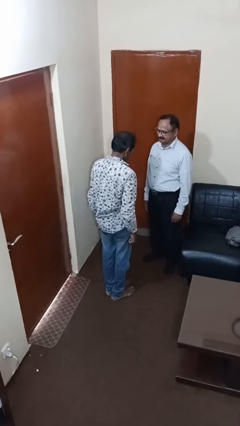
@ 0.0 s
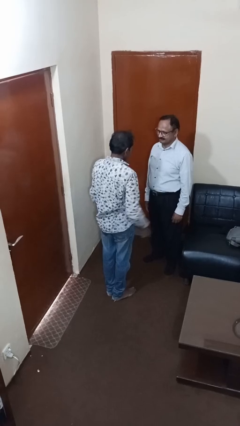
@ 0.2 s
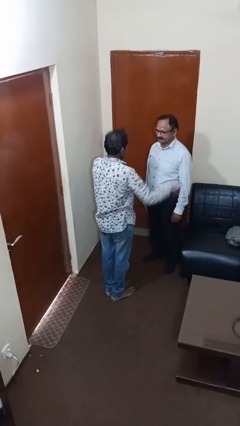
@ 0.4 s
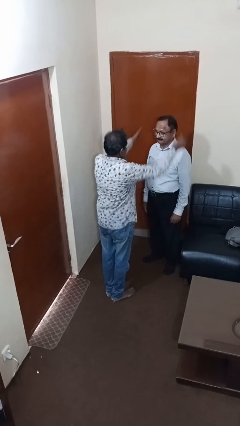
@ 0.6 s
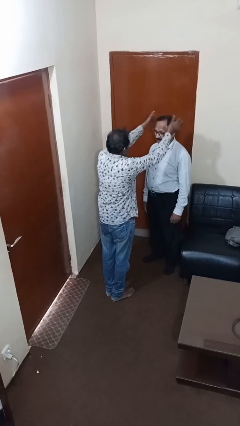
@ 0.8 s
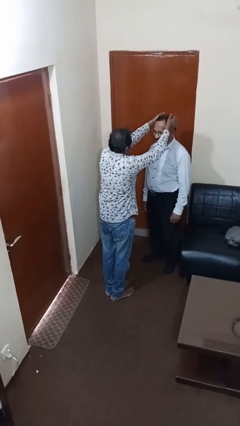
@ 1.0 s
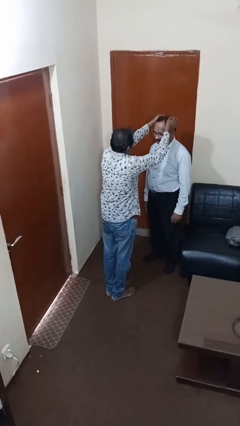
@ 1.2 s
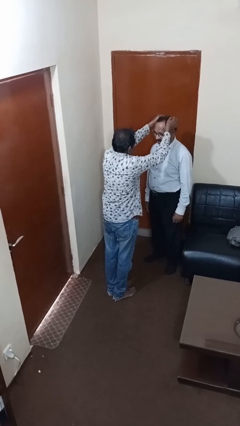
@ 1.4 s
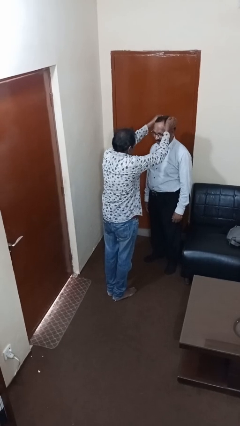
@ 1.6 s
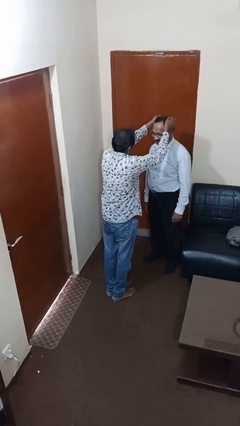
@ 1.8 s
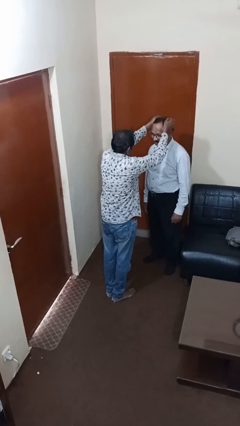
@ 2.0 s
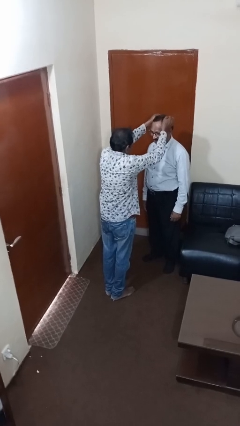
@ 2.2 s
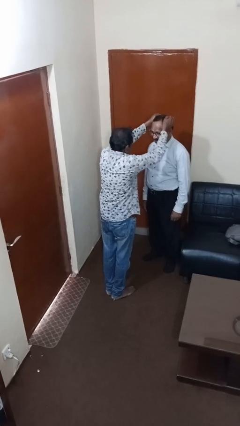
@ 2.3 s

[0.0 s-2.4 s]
person grabs person by hair

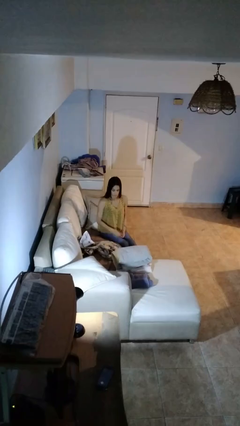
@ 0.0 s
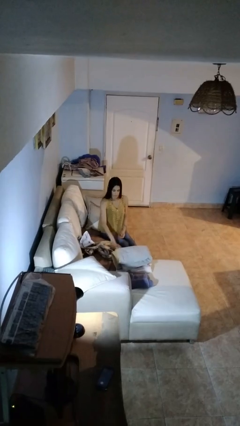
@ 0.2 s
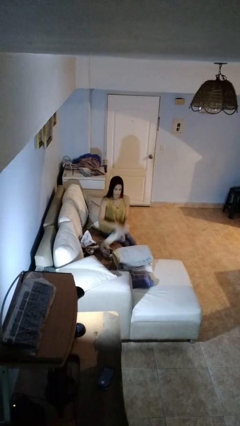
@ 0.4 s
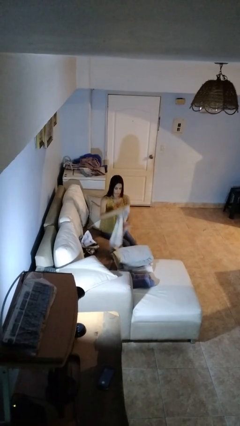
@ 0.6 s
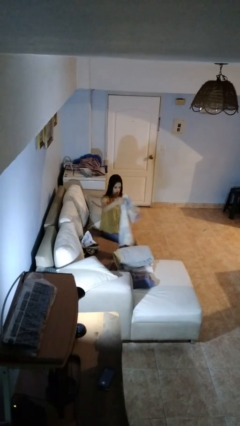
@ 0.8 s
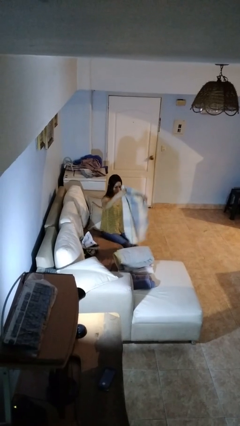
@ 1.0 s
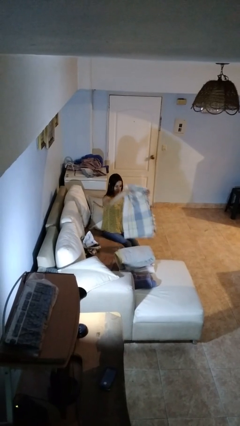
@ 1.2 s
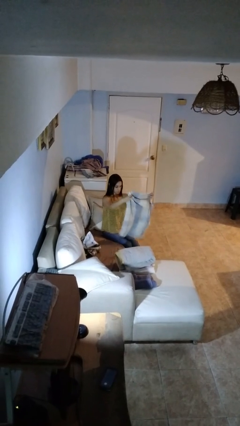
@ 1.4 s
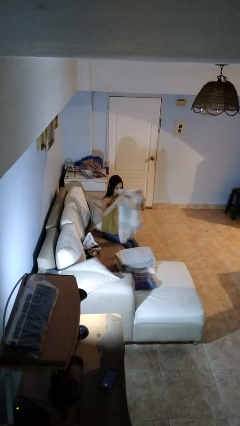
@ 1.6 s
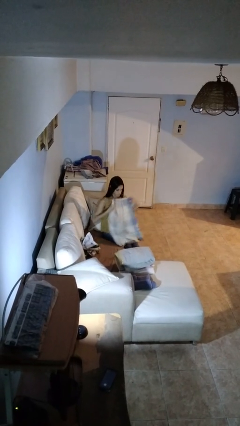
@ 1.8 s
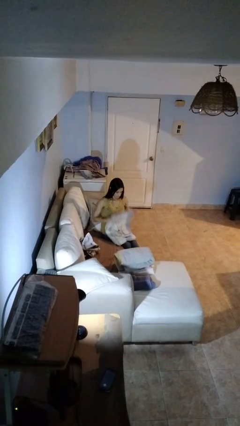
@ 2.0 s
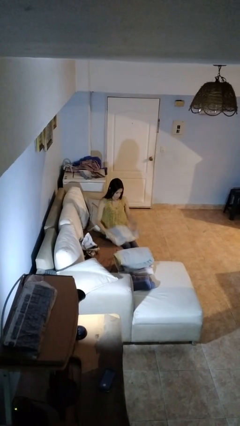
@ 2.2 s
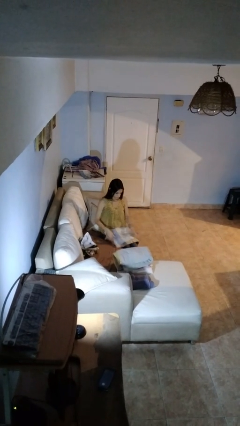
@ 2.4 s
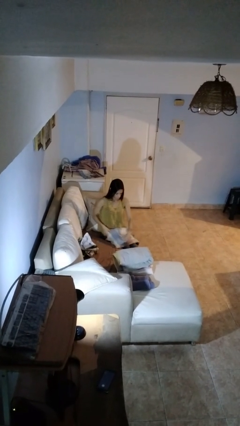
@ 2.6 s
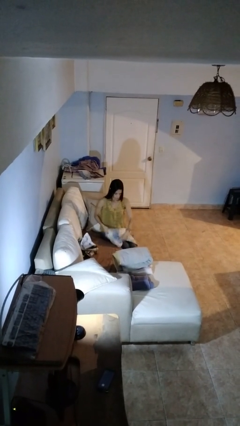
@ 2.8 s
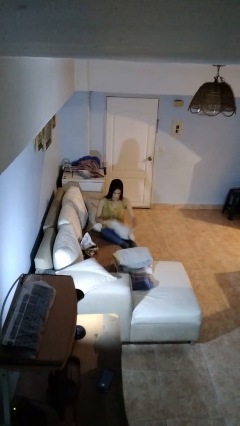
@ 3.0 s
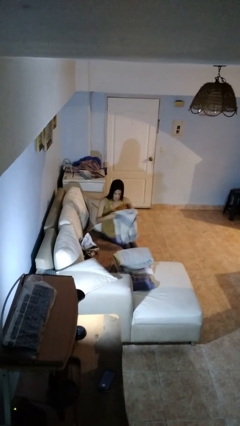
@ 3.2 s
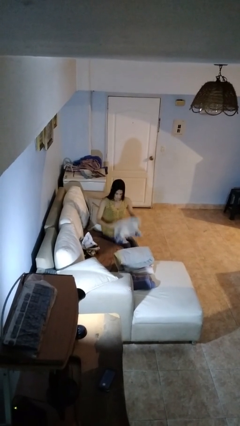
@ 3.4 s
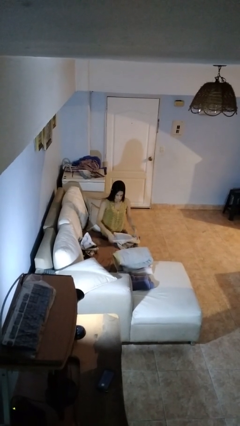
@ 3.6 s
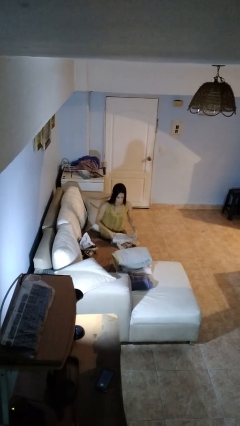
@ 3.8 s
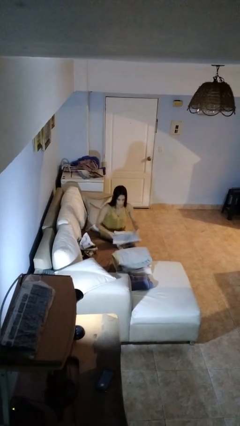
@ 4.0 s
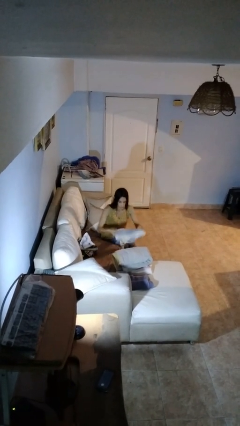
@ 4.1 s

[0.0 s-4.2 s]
person folds towel

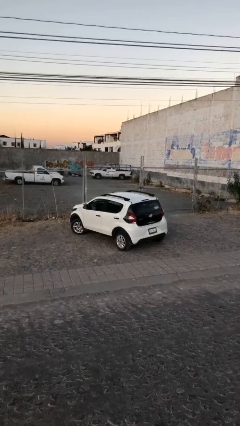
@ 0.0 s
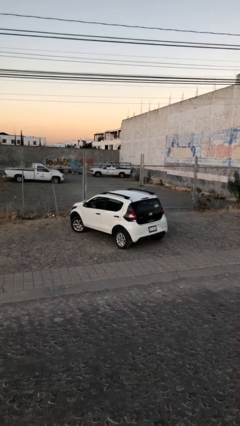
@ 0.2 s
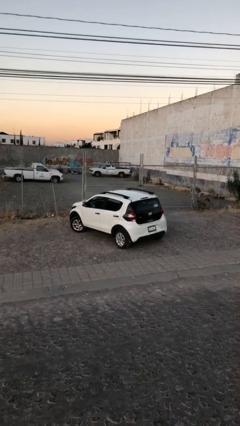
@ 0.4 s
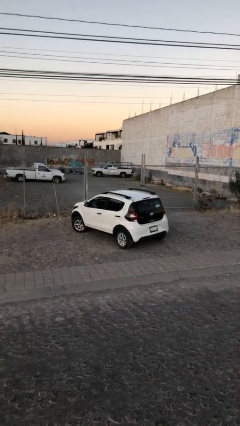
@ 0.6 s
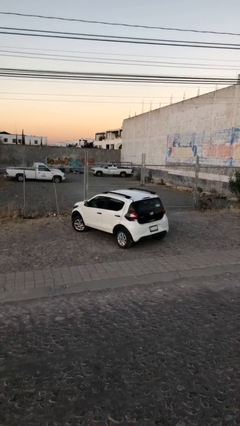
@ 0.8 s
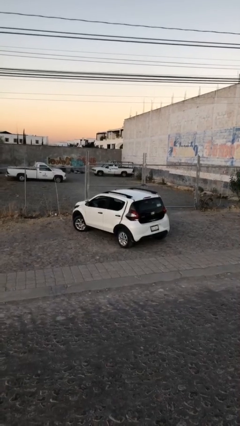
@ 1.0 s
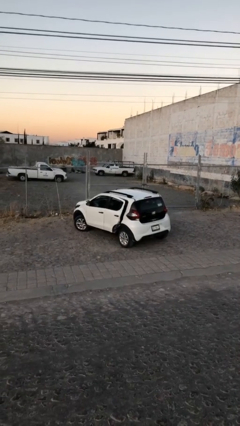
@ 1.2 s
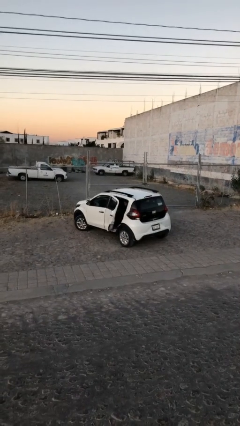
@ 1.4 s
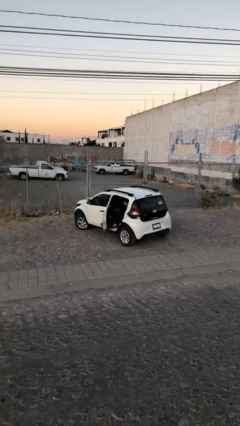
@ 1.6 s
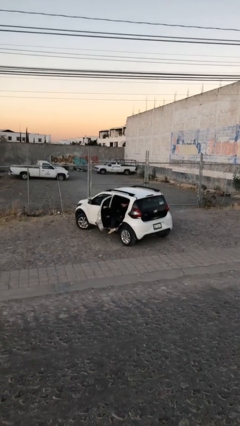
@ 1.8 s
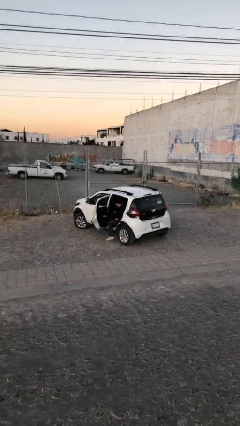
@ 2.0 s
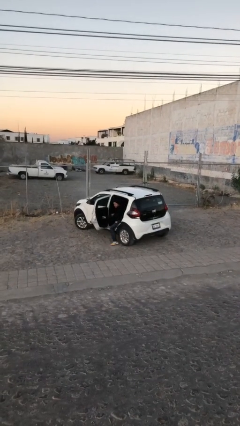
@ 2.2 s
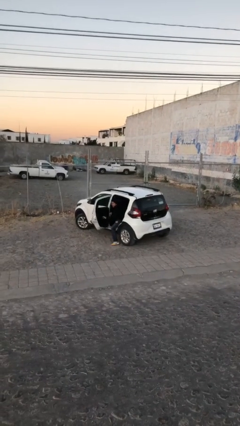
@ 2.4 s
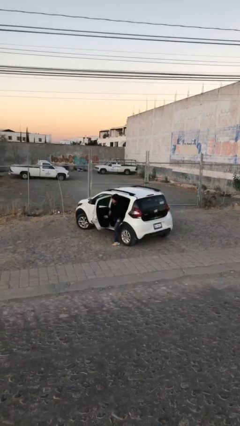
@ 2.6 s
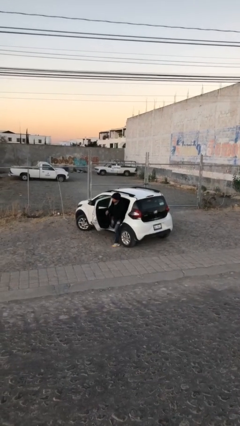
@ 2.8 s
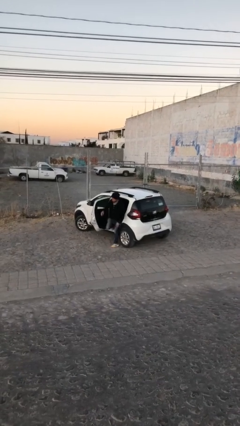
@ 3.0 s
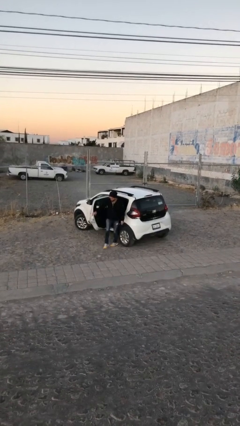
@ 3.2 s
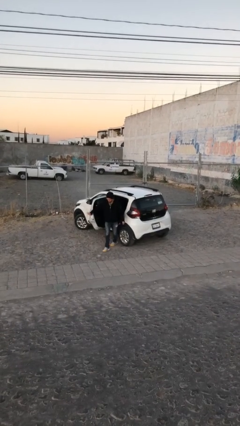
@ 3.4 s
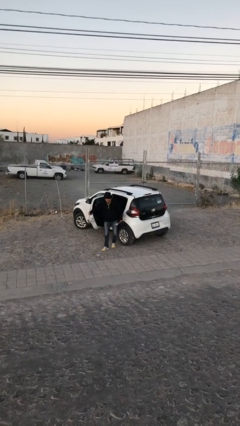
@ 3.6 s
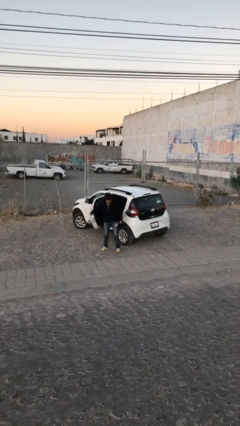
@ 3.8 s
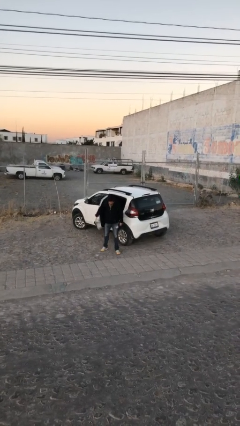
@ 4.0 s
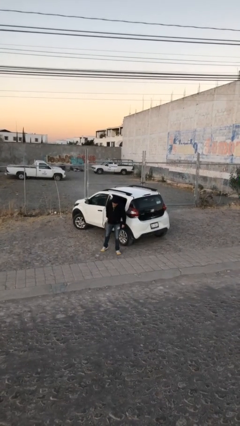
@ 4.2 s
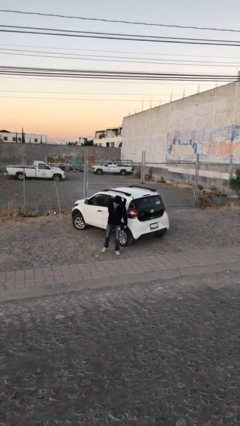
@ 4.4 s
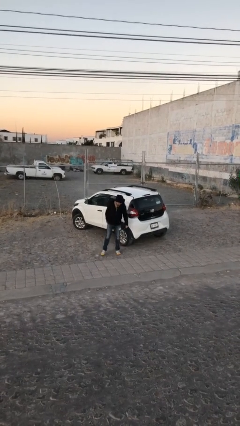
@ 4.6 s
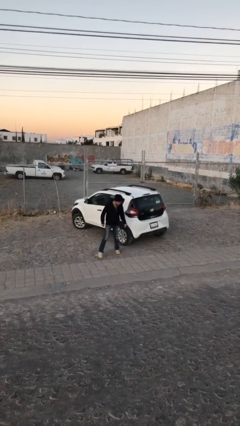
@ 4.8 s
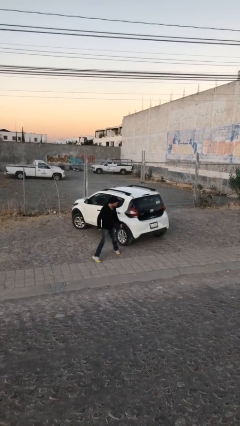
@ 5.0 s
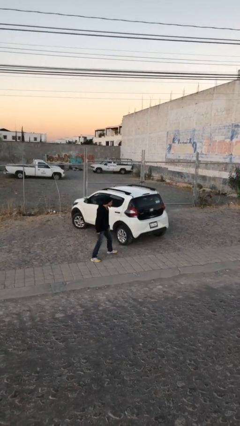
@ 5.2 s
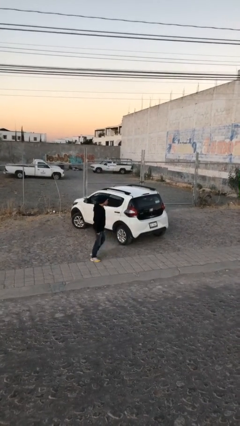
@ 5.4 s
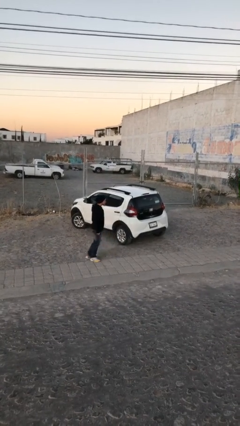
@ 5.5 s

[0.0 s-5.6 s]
car drops off person

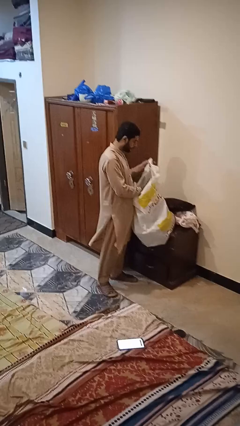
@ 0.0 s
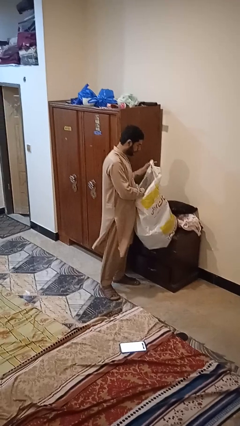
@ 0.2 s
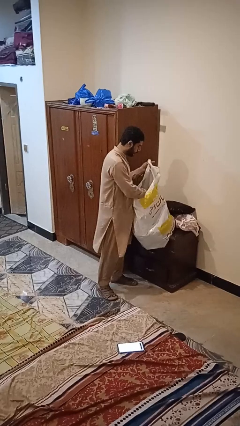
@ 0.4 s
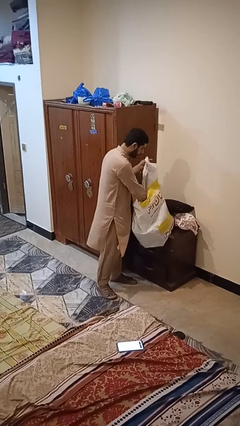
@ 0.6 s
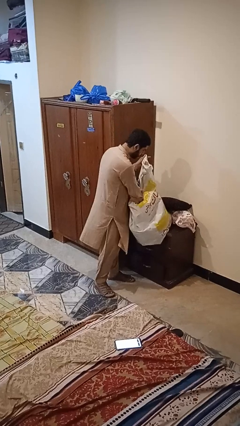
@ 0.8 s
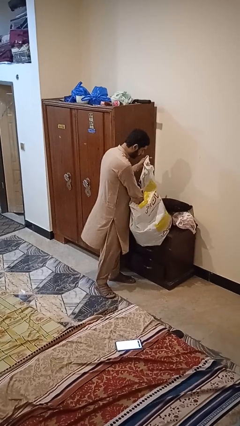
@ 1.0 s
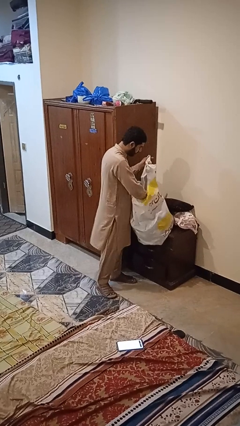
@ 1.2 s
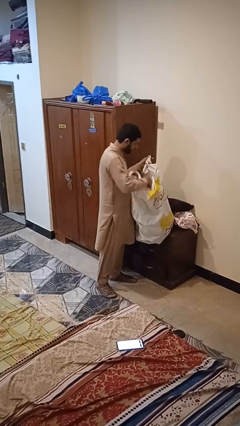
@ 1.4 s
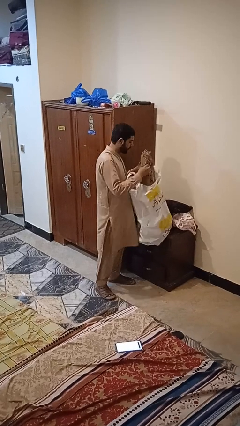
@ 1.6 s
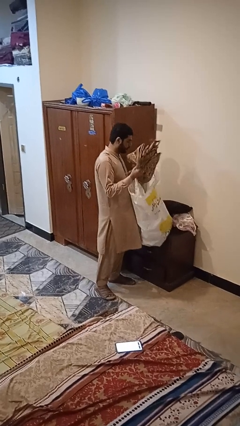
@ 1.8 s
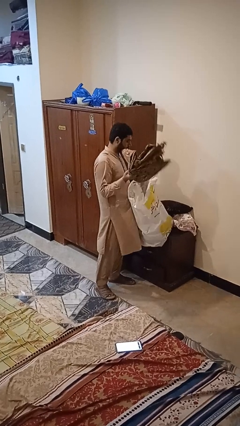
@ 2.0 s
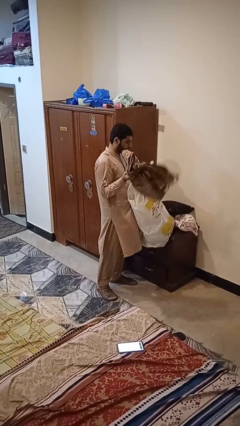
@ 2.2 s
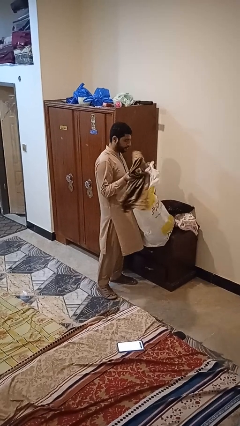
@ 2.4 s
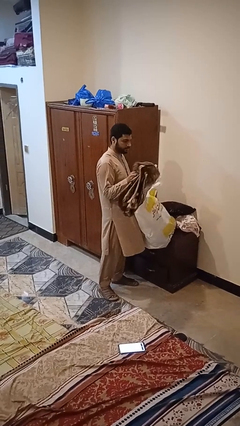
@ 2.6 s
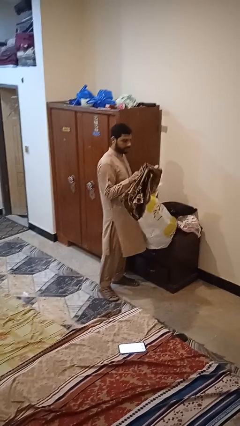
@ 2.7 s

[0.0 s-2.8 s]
person takes object from bag

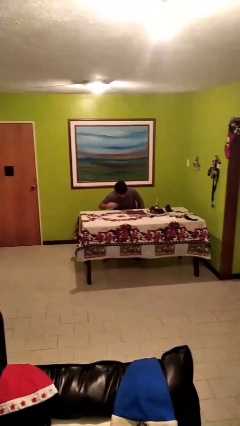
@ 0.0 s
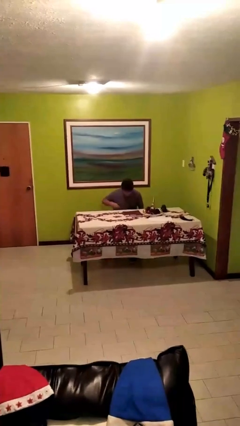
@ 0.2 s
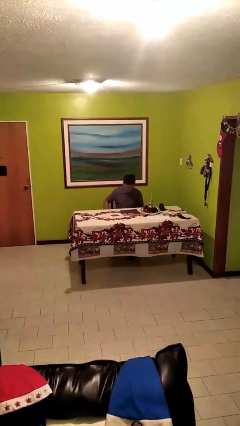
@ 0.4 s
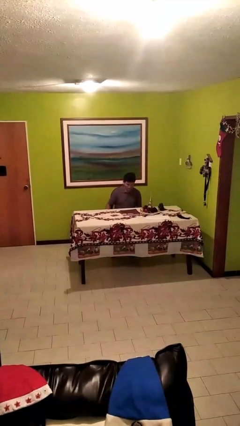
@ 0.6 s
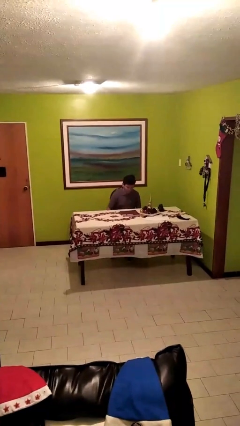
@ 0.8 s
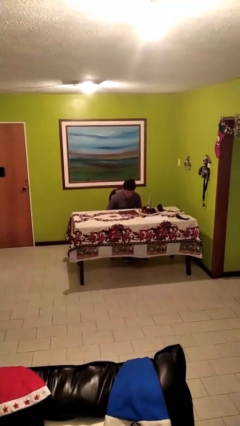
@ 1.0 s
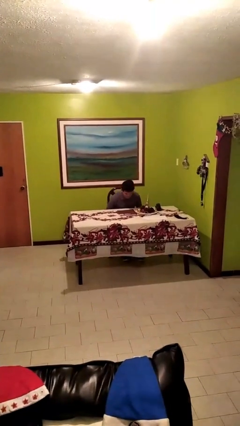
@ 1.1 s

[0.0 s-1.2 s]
person sits down

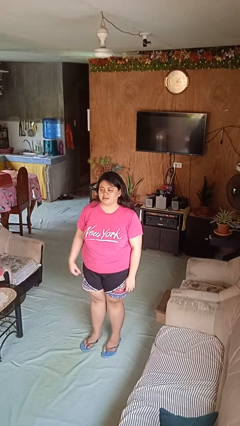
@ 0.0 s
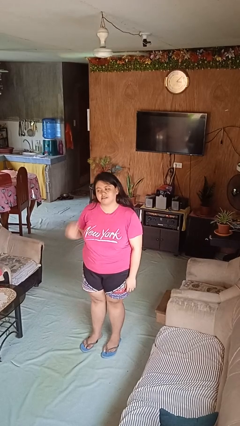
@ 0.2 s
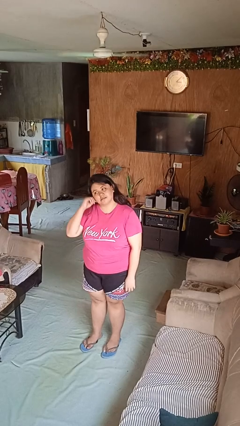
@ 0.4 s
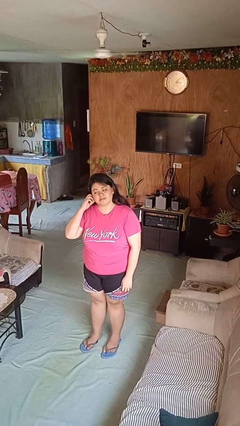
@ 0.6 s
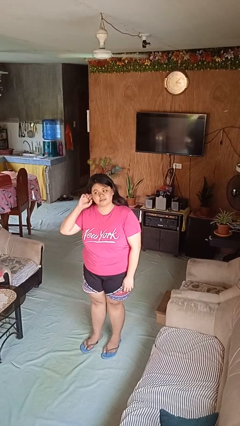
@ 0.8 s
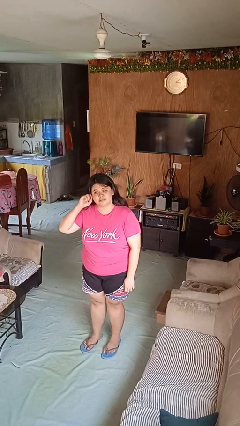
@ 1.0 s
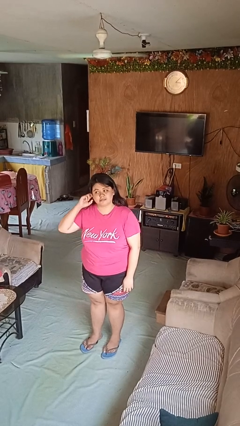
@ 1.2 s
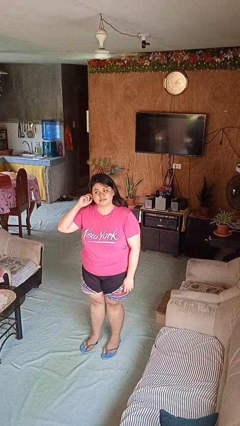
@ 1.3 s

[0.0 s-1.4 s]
person touches earlobe
